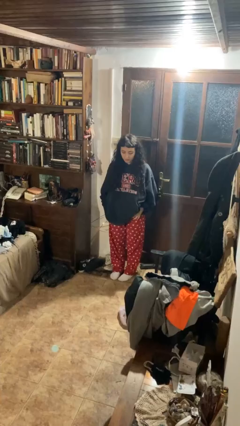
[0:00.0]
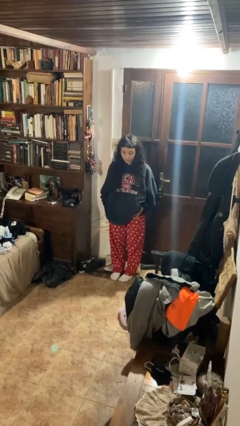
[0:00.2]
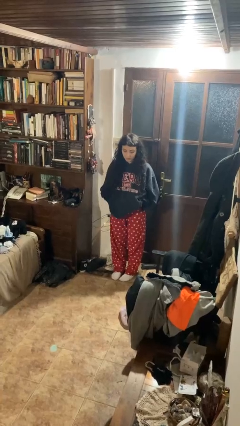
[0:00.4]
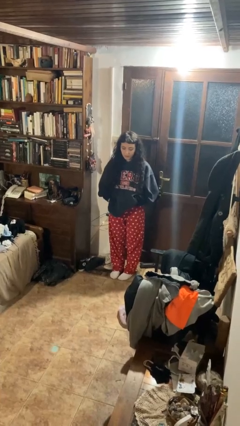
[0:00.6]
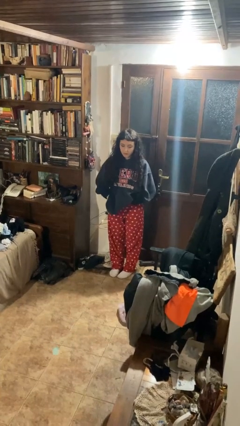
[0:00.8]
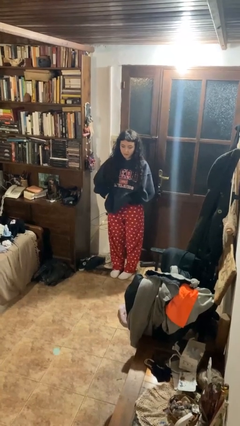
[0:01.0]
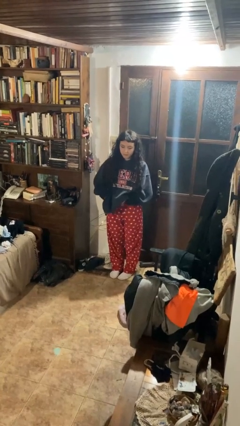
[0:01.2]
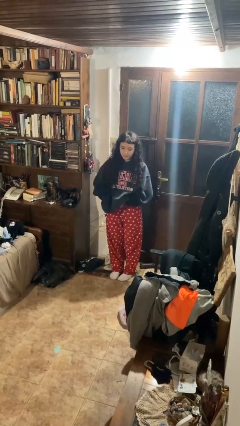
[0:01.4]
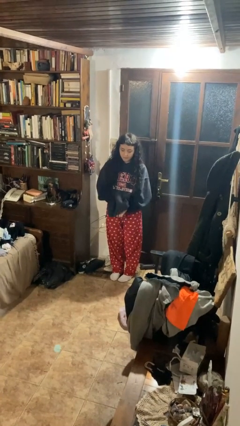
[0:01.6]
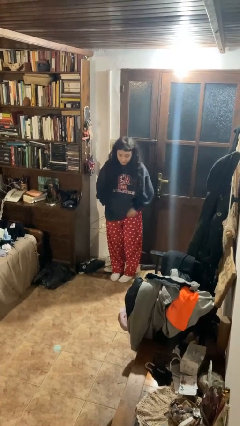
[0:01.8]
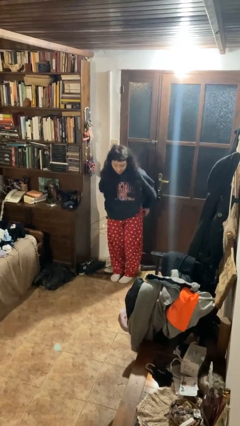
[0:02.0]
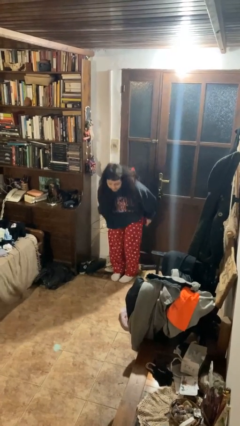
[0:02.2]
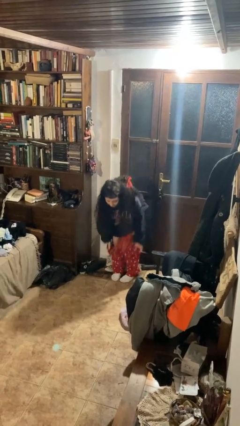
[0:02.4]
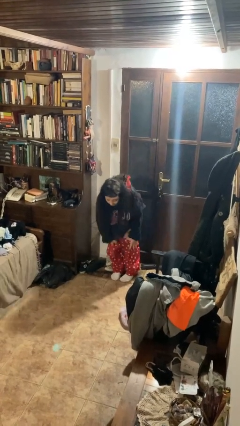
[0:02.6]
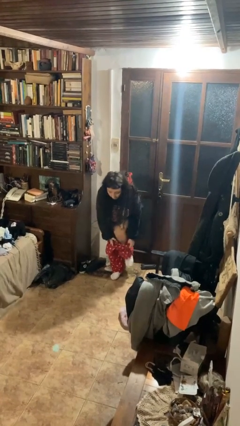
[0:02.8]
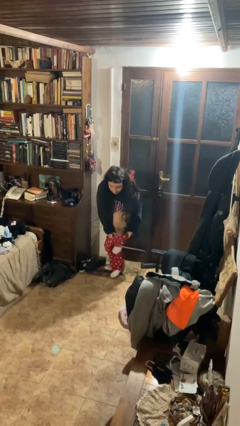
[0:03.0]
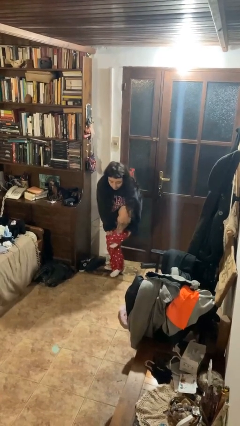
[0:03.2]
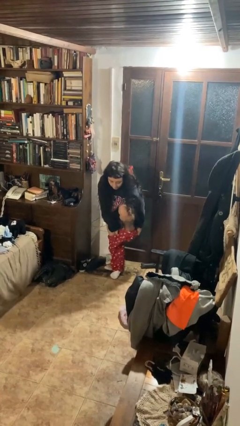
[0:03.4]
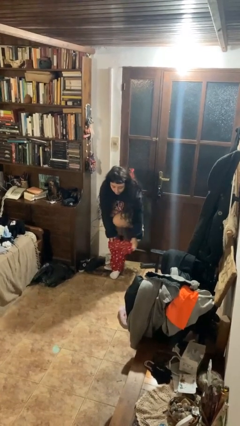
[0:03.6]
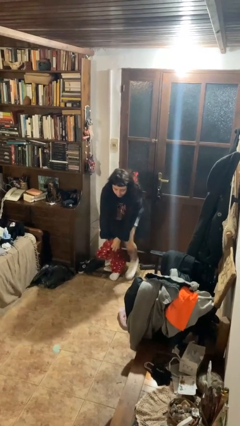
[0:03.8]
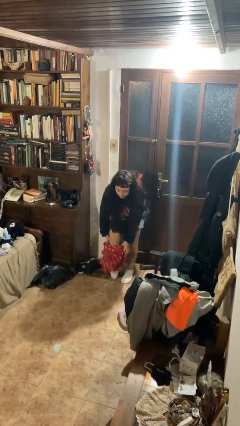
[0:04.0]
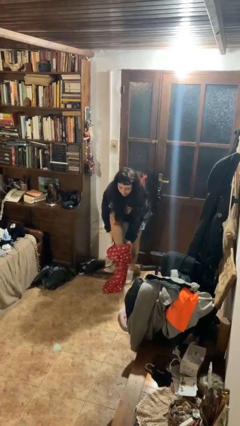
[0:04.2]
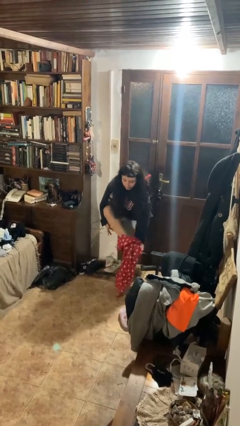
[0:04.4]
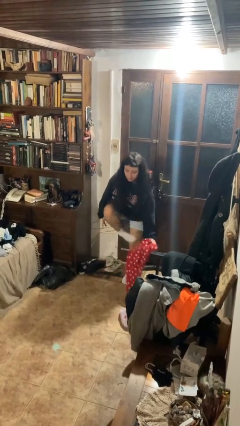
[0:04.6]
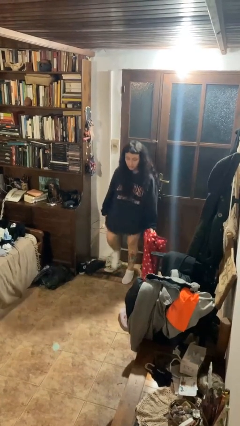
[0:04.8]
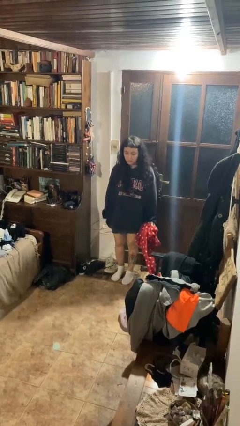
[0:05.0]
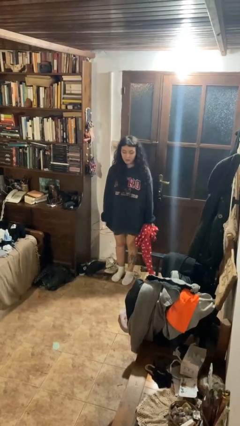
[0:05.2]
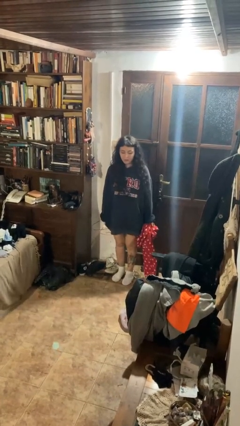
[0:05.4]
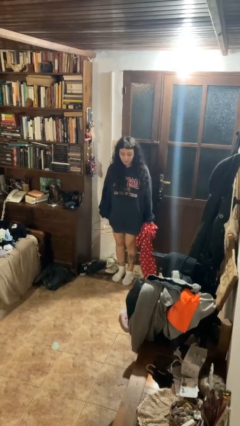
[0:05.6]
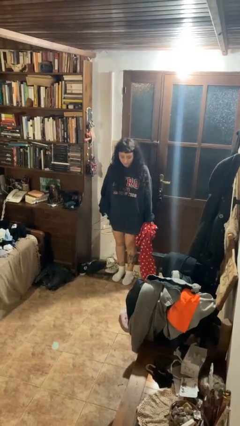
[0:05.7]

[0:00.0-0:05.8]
person takes off pants

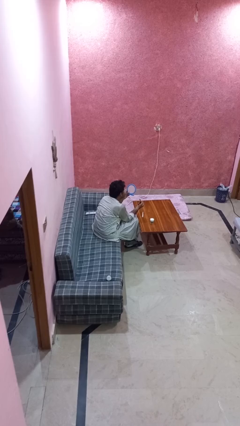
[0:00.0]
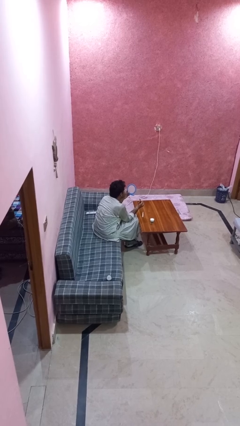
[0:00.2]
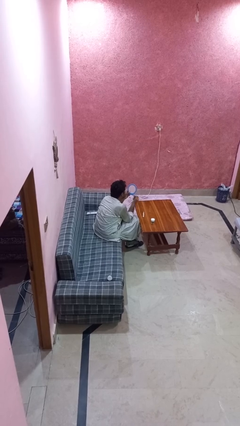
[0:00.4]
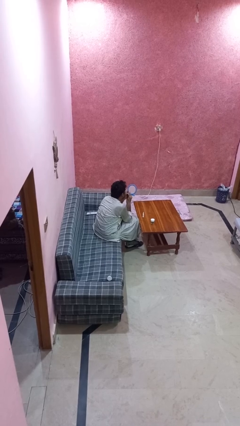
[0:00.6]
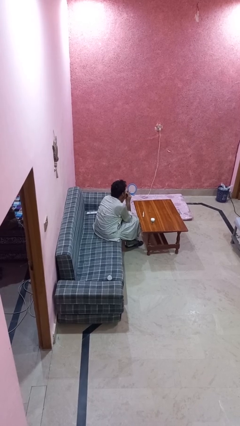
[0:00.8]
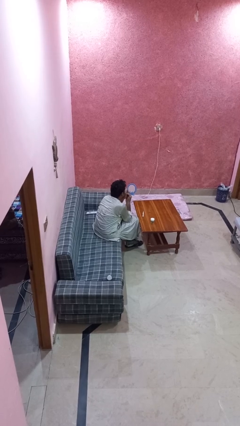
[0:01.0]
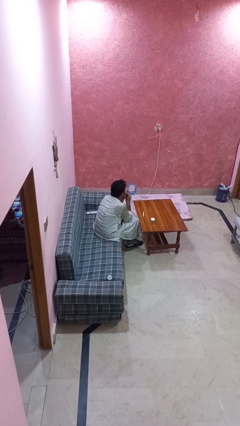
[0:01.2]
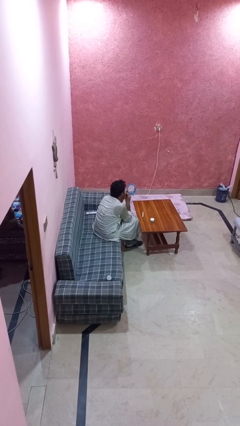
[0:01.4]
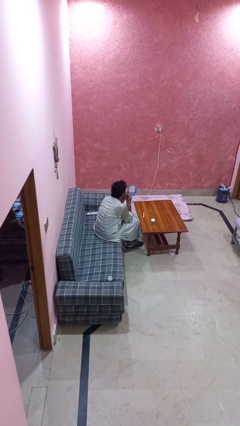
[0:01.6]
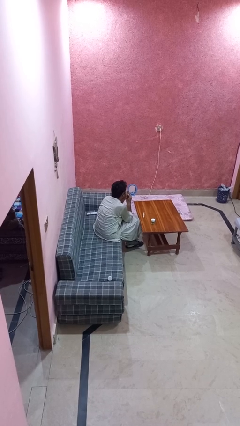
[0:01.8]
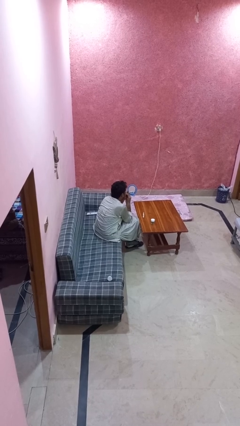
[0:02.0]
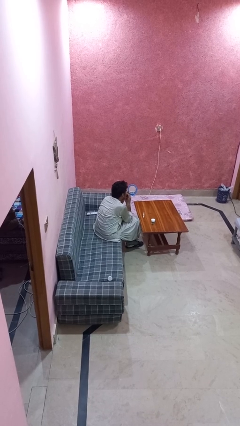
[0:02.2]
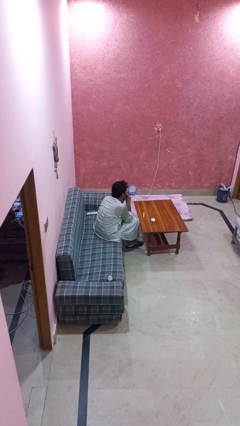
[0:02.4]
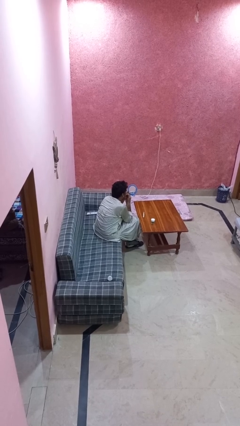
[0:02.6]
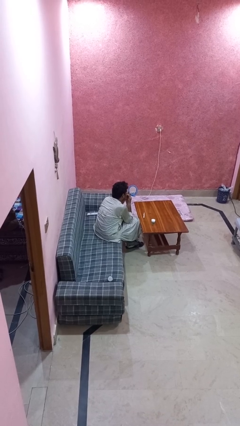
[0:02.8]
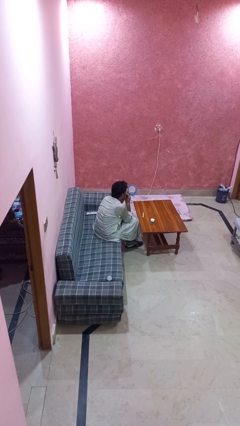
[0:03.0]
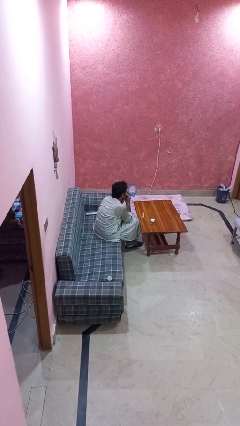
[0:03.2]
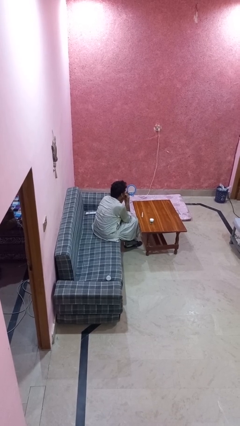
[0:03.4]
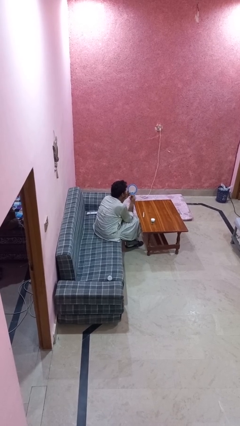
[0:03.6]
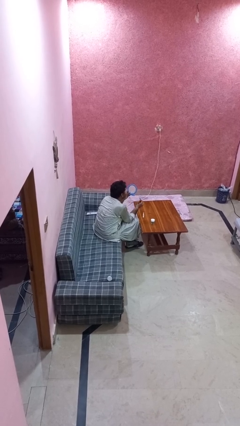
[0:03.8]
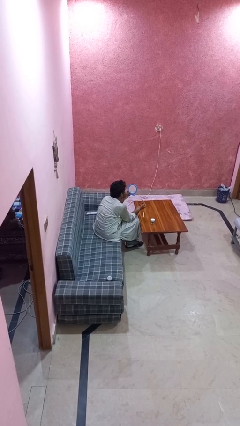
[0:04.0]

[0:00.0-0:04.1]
person applies lip makeup

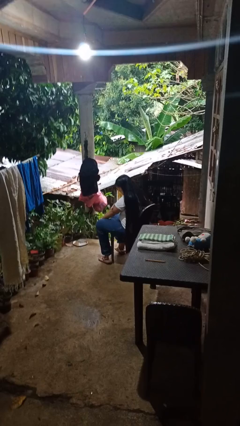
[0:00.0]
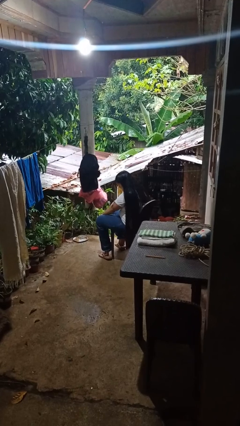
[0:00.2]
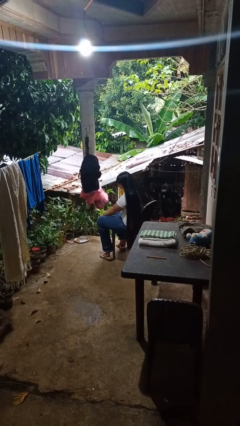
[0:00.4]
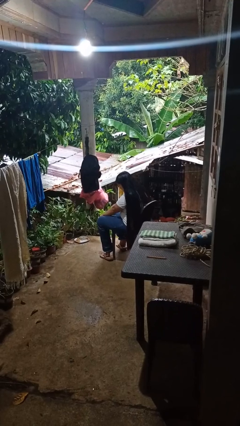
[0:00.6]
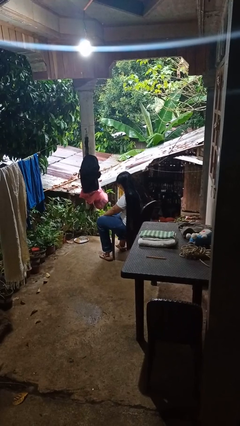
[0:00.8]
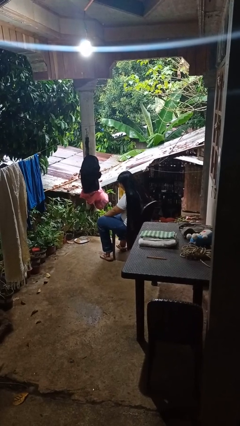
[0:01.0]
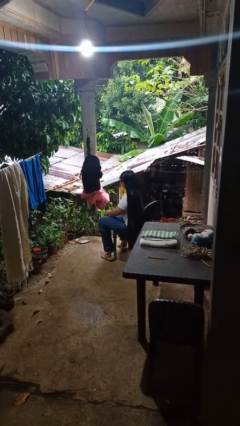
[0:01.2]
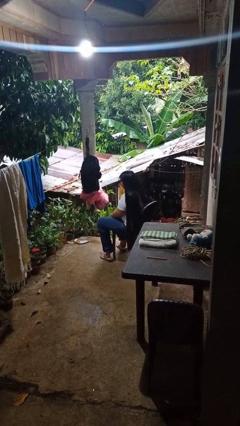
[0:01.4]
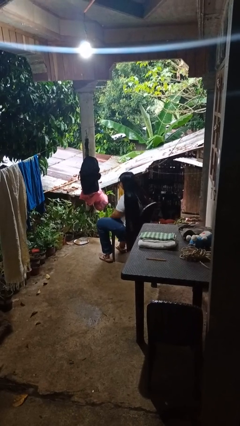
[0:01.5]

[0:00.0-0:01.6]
person swats bug

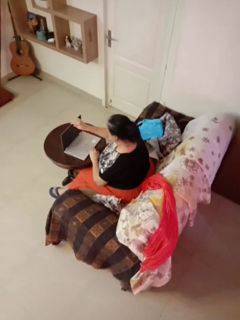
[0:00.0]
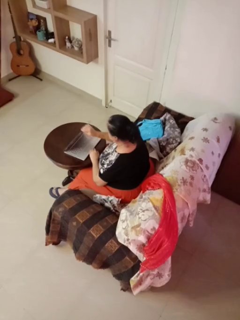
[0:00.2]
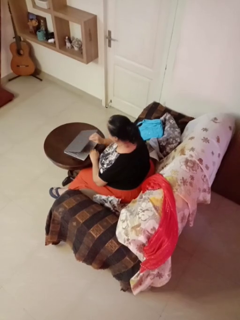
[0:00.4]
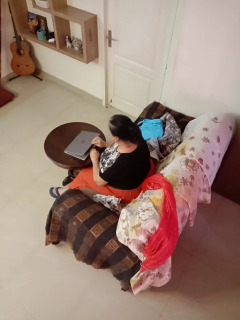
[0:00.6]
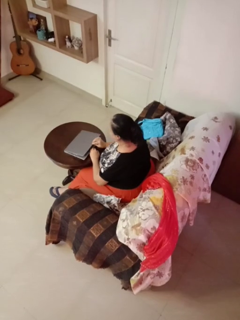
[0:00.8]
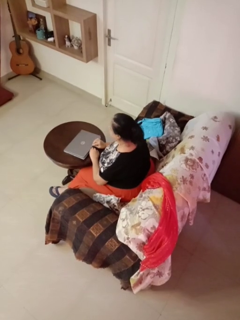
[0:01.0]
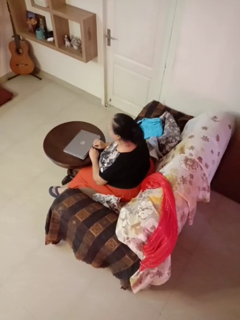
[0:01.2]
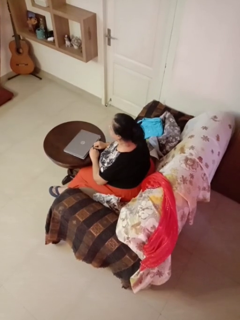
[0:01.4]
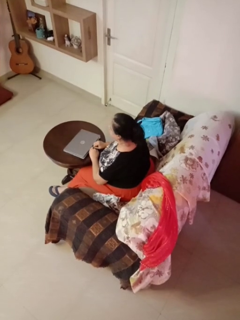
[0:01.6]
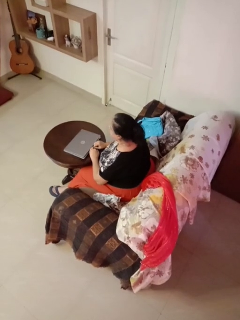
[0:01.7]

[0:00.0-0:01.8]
person closes laptop

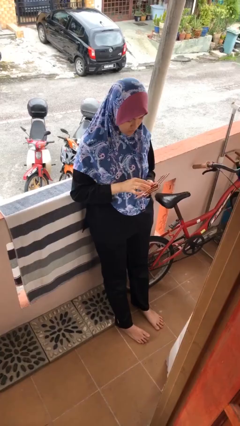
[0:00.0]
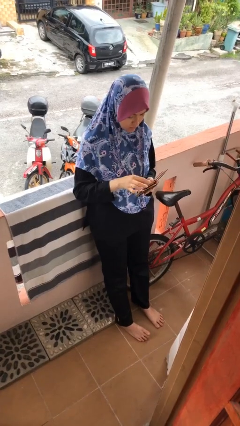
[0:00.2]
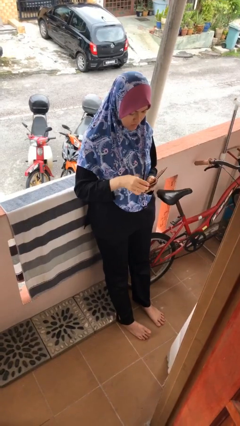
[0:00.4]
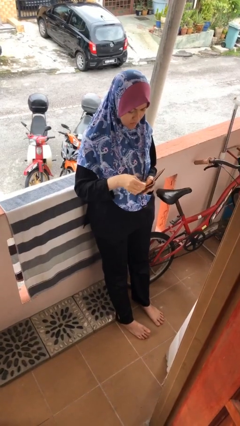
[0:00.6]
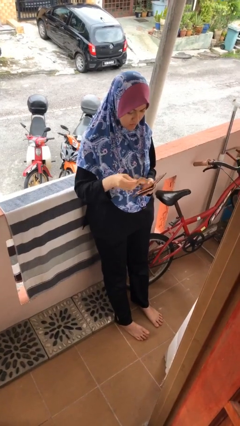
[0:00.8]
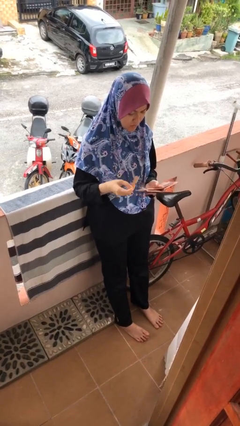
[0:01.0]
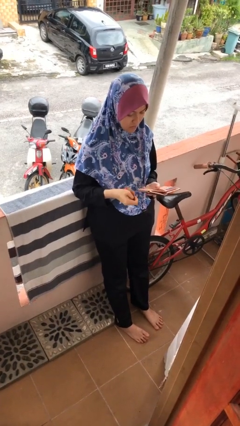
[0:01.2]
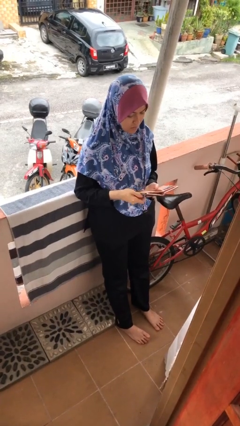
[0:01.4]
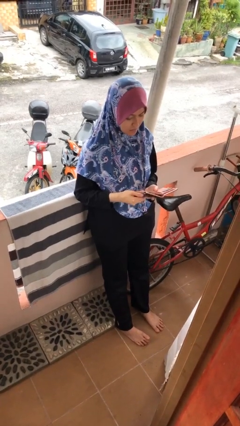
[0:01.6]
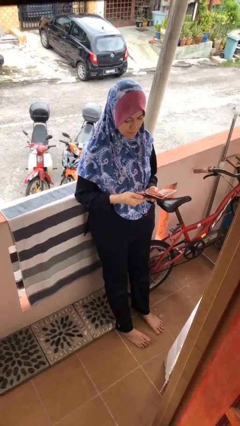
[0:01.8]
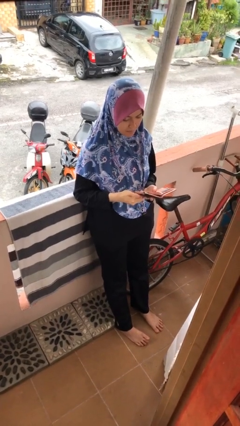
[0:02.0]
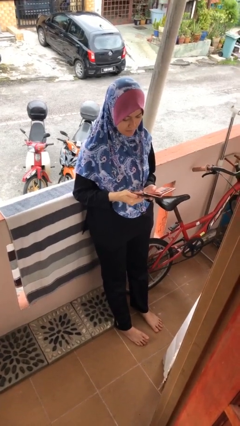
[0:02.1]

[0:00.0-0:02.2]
person takes object from purse

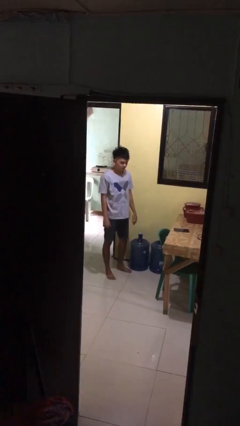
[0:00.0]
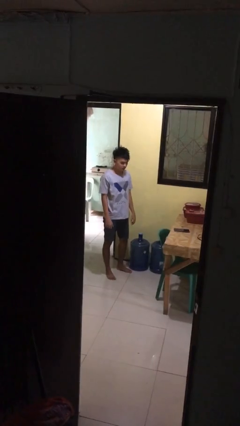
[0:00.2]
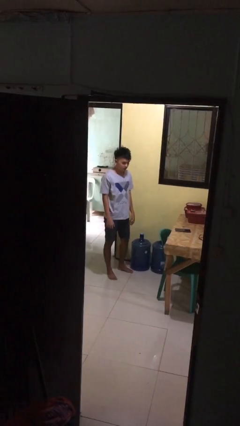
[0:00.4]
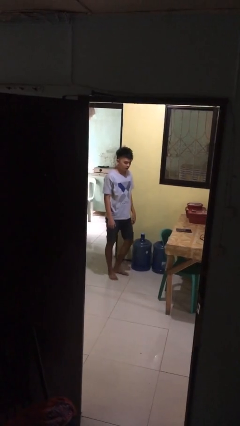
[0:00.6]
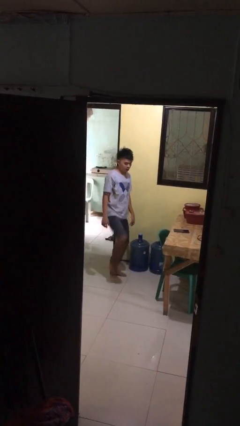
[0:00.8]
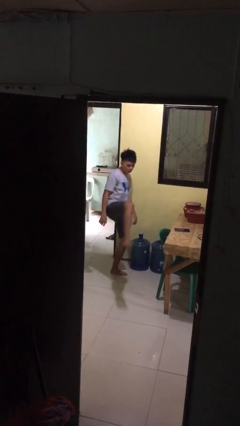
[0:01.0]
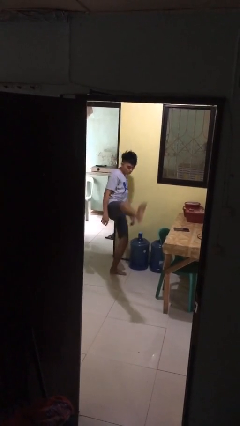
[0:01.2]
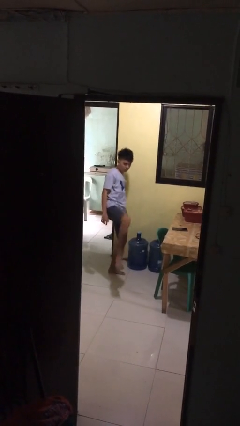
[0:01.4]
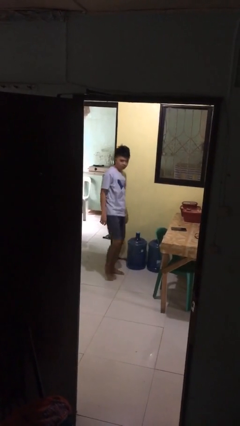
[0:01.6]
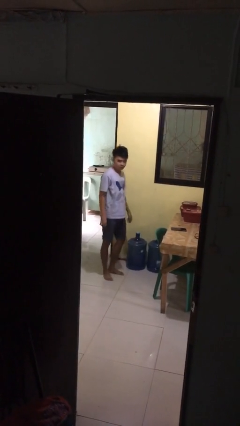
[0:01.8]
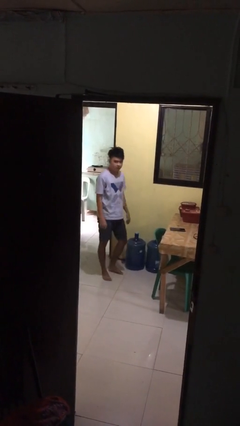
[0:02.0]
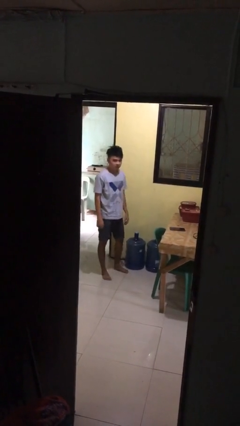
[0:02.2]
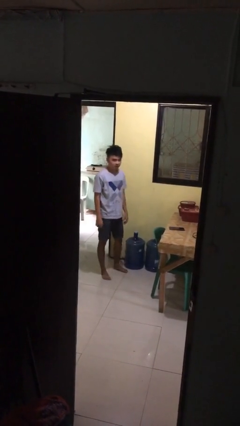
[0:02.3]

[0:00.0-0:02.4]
person karate kicks

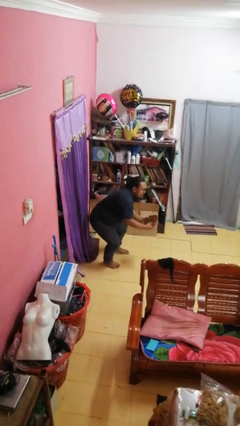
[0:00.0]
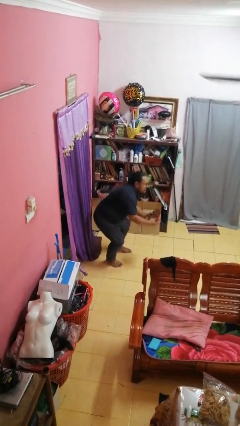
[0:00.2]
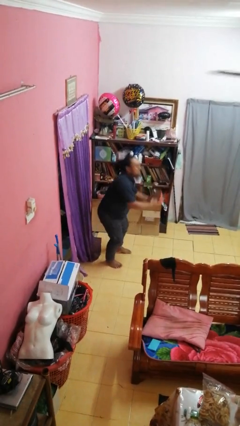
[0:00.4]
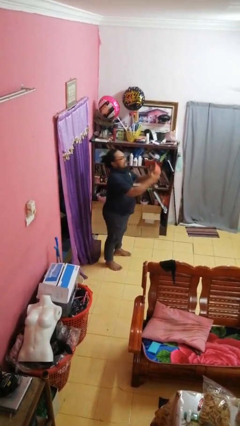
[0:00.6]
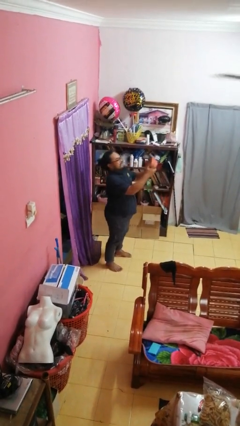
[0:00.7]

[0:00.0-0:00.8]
person catches dropped object
